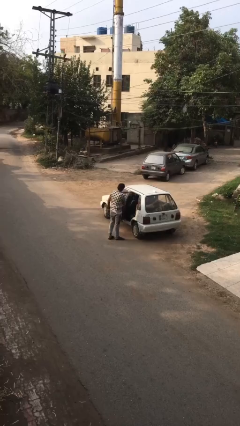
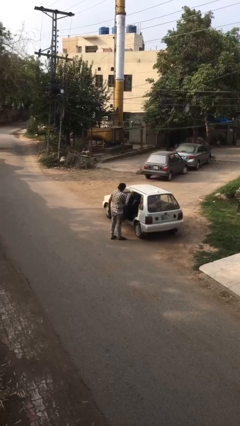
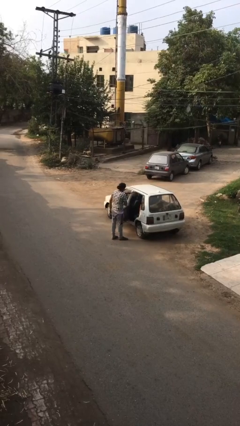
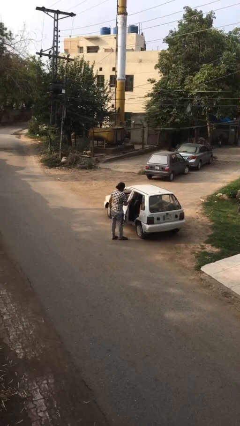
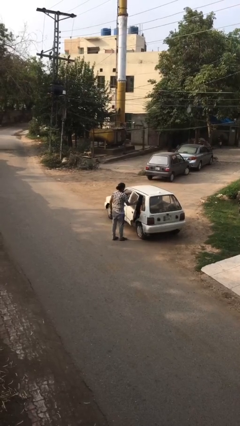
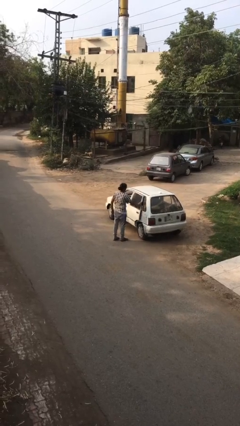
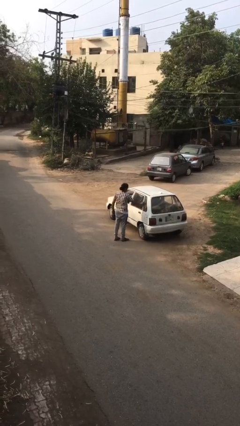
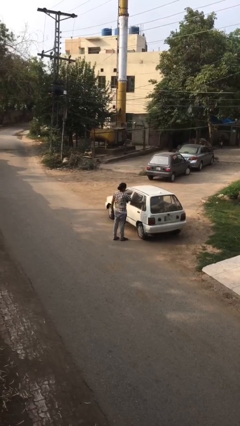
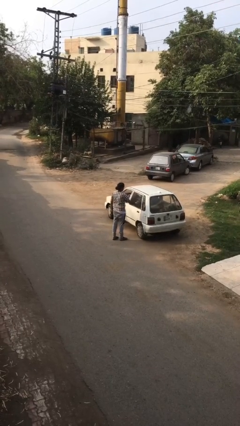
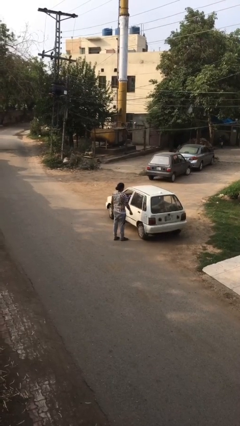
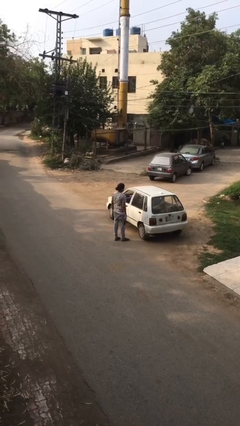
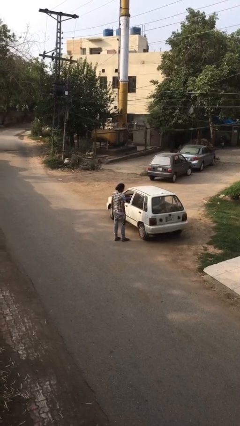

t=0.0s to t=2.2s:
person closes car door

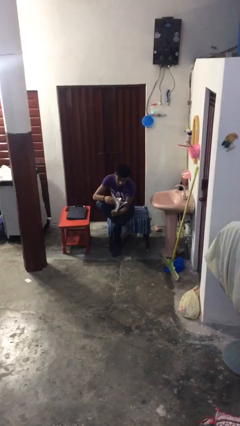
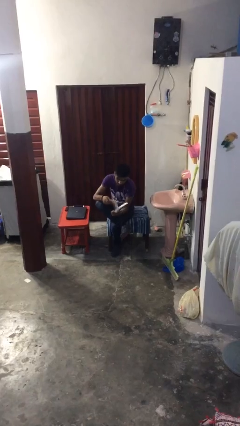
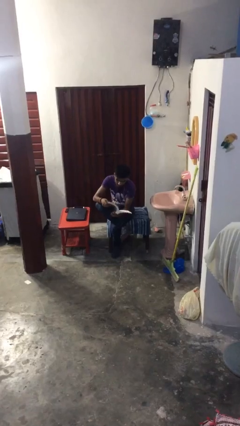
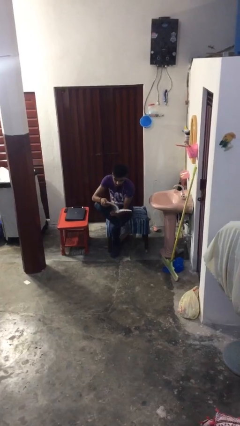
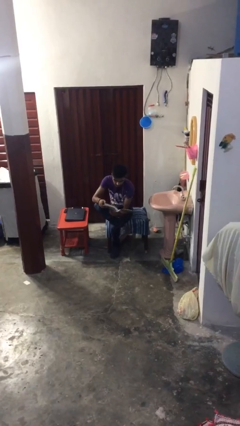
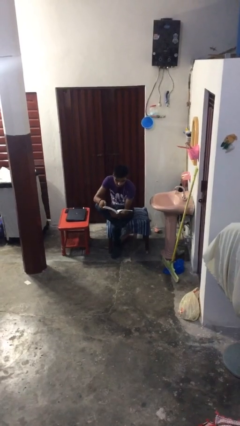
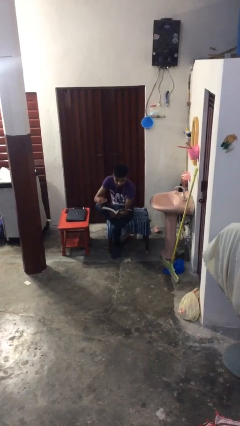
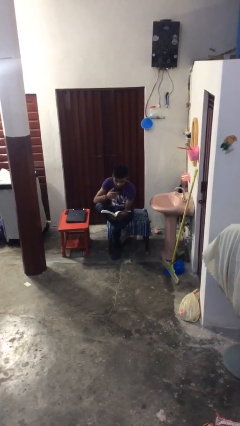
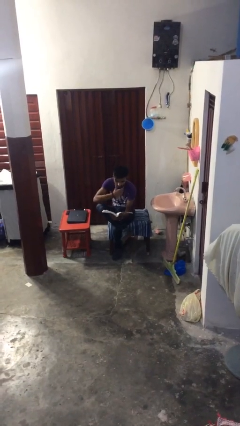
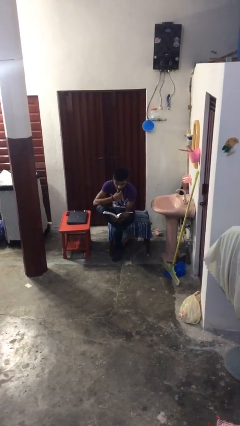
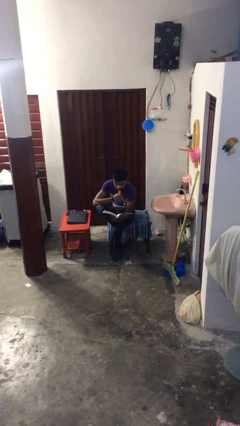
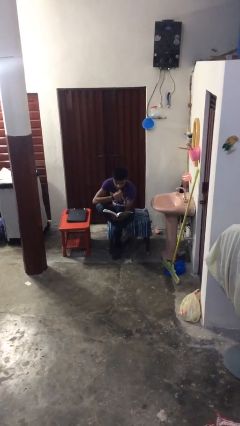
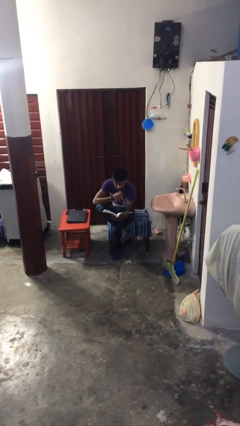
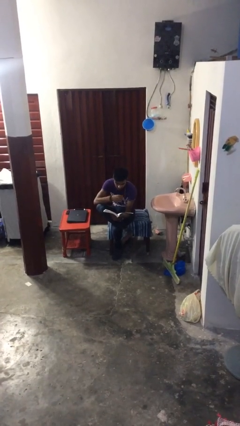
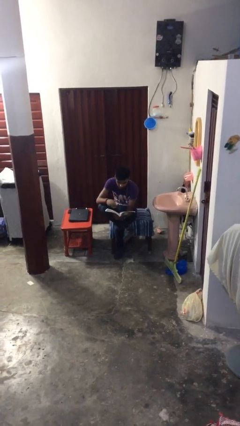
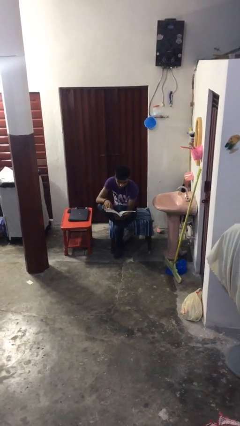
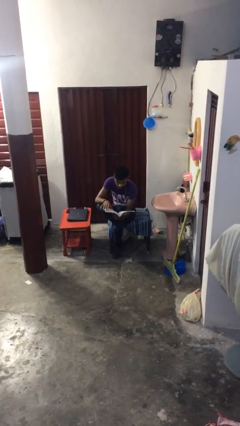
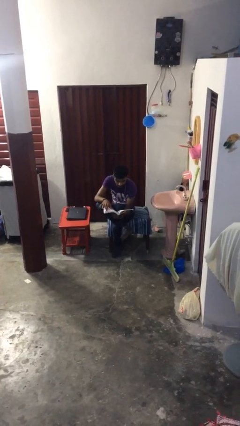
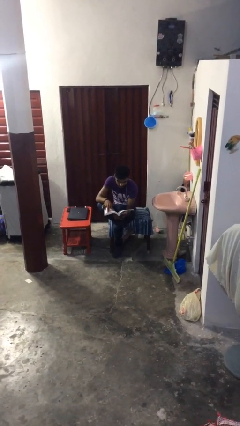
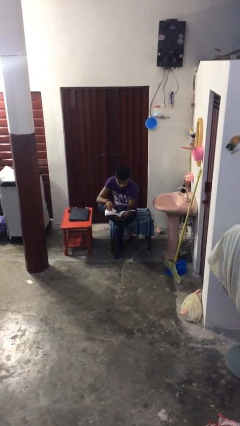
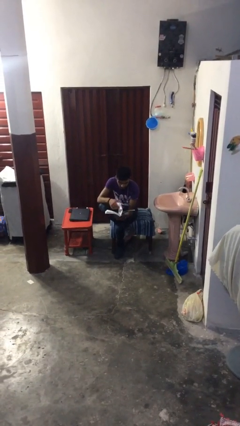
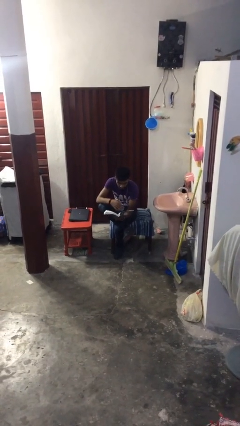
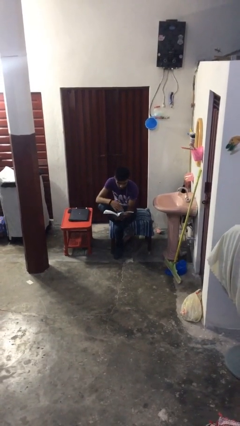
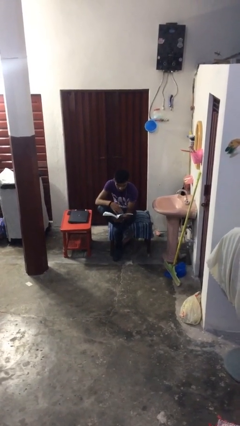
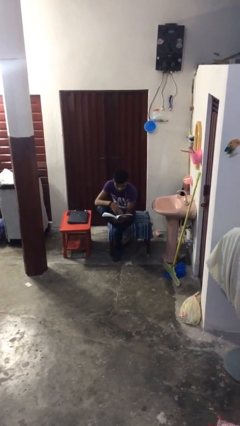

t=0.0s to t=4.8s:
person reads document

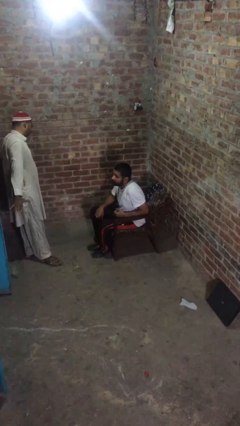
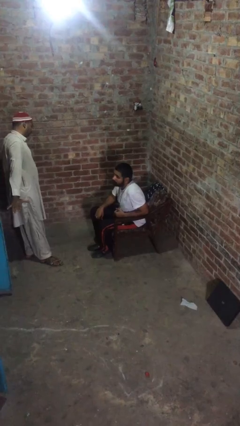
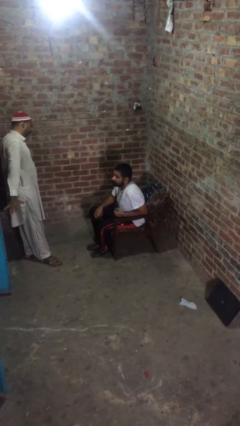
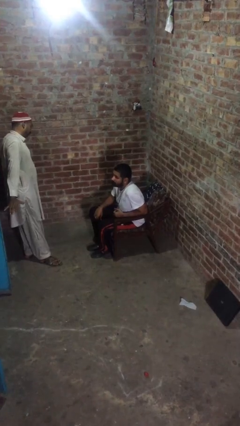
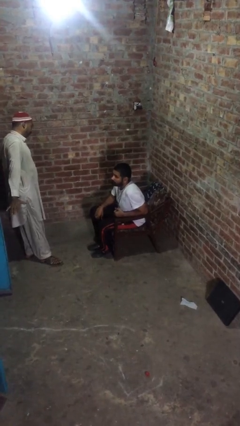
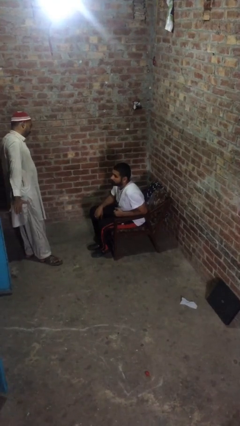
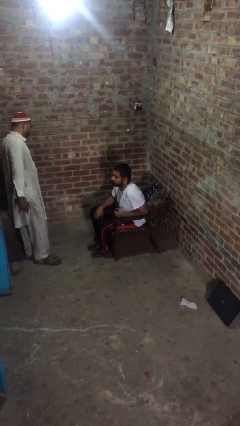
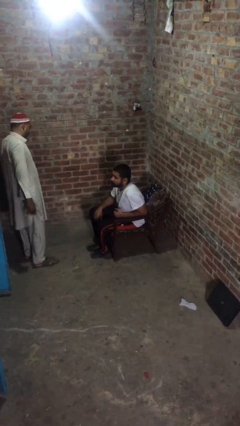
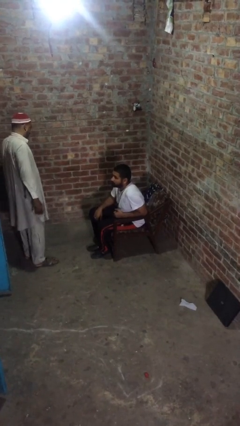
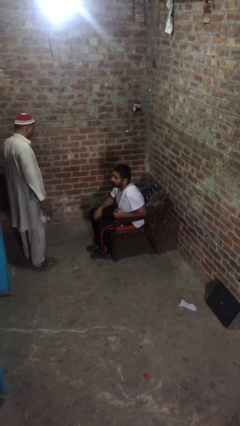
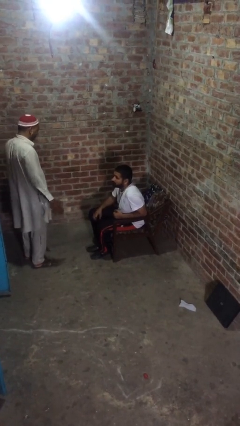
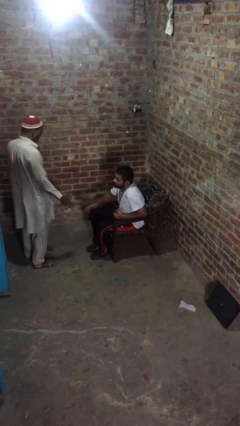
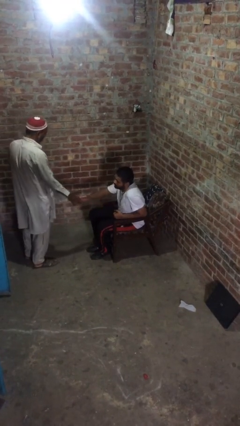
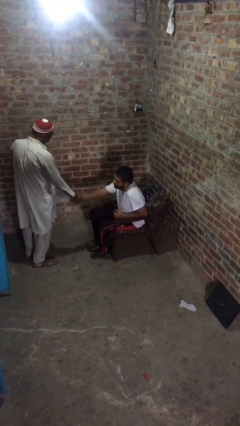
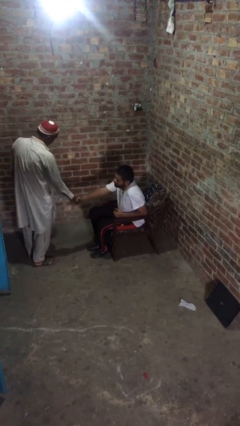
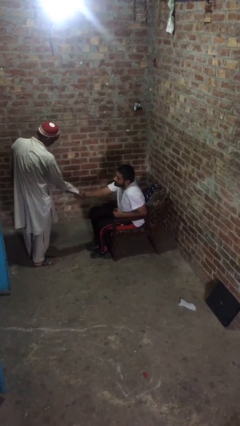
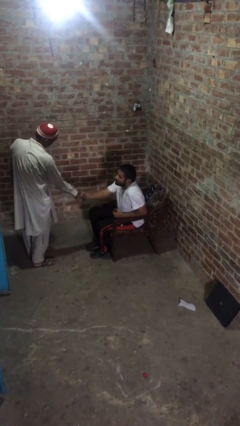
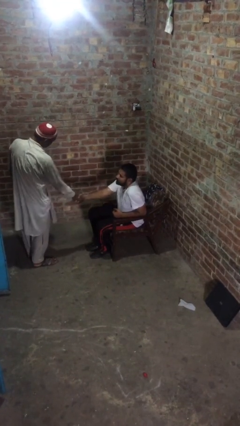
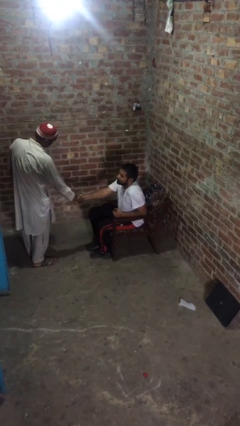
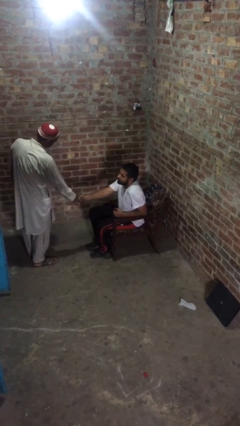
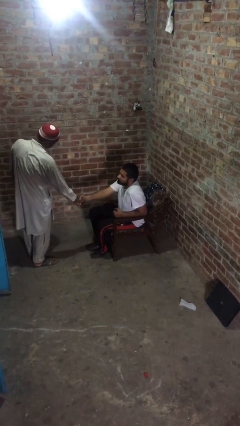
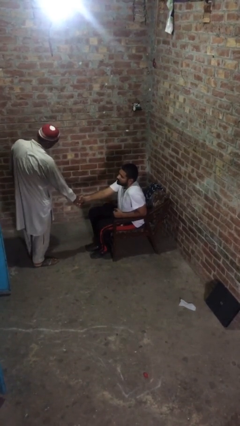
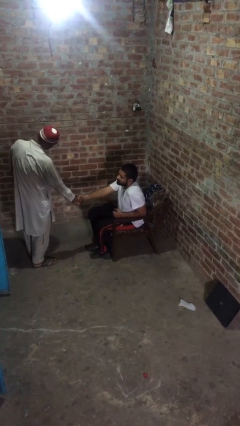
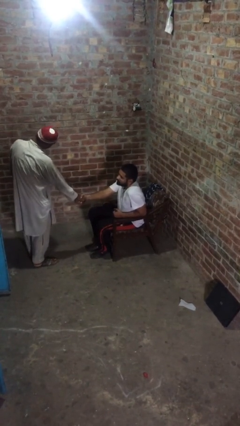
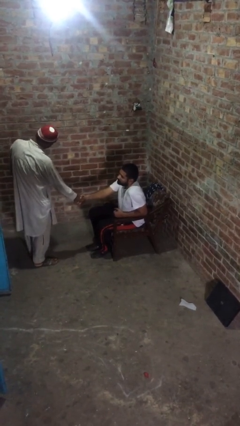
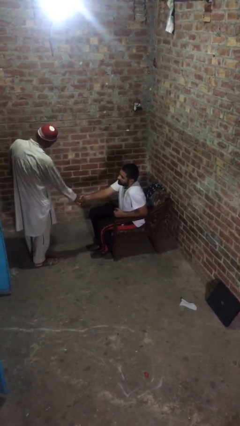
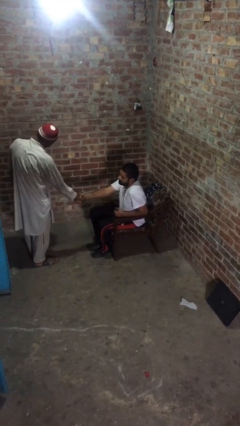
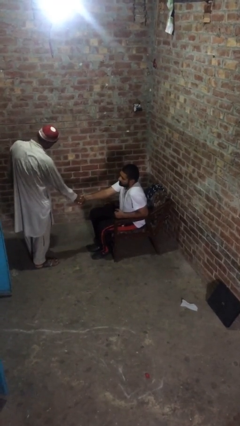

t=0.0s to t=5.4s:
person shakes hand

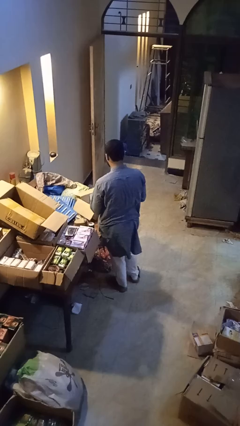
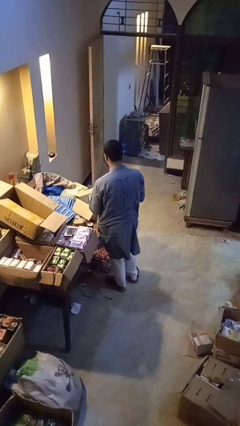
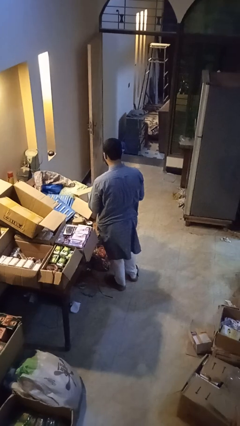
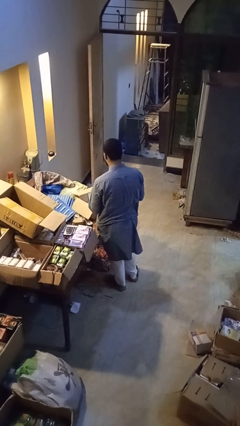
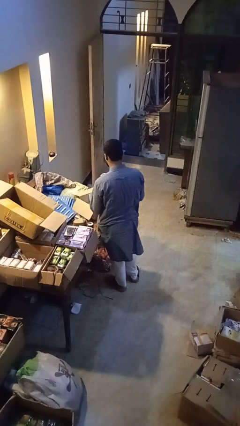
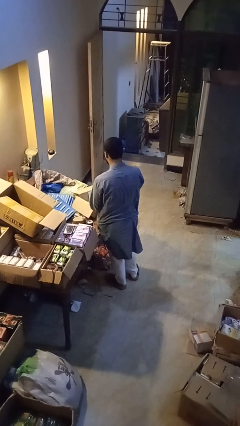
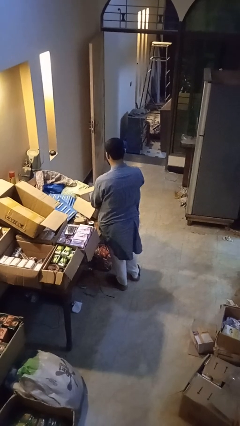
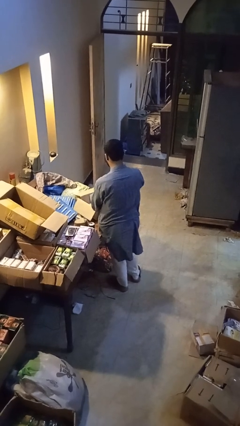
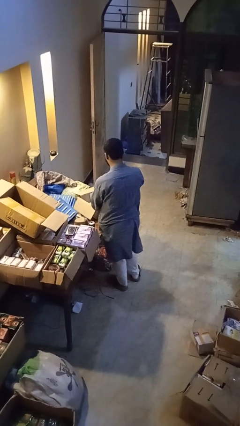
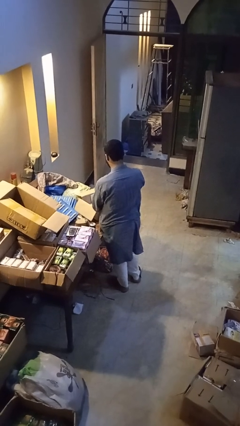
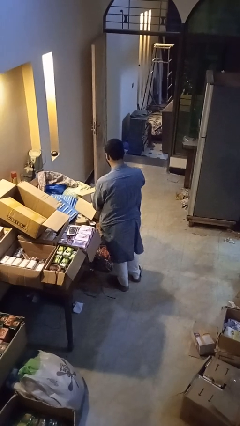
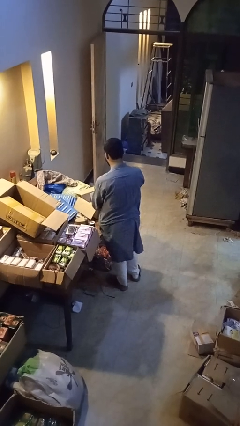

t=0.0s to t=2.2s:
person puts object into box

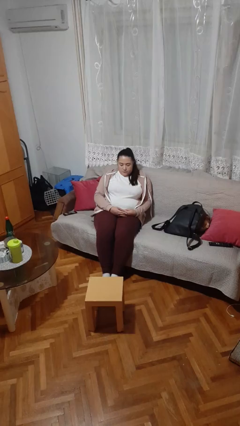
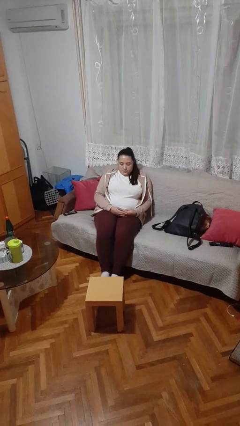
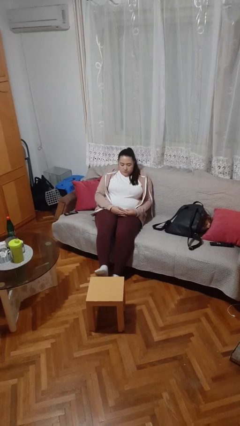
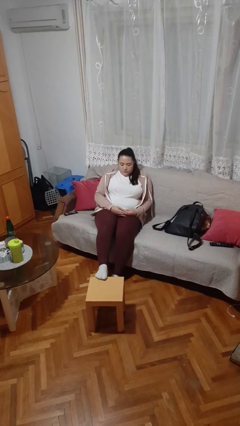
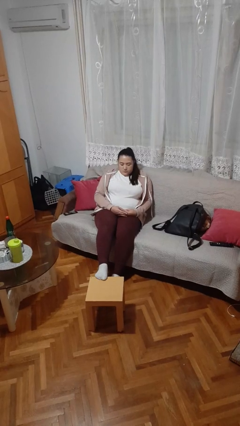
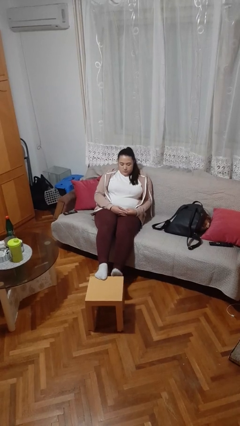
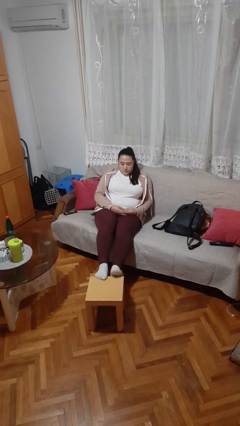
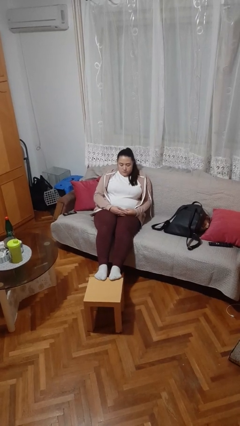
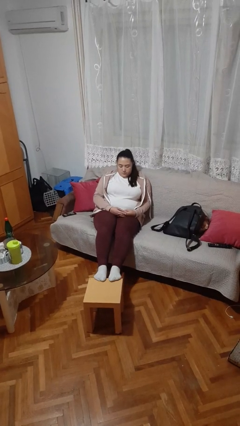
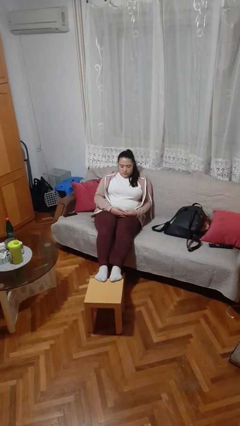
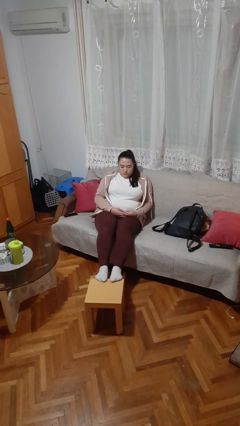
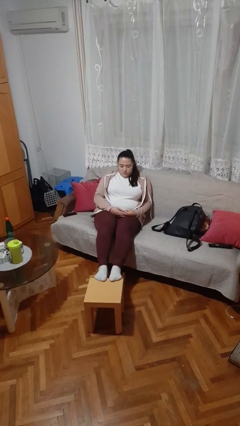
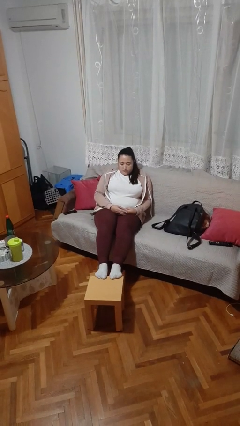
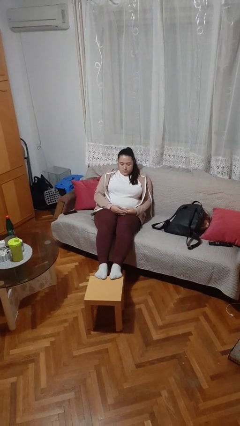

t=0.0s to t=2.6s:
person puts feet up

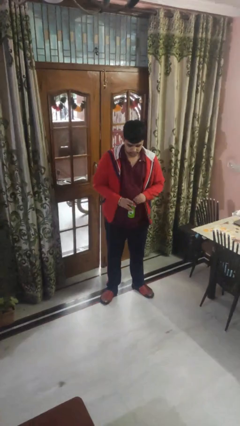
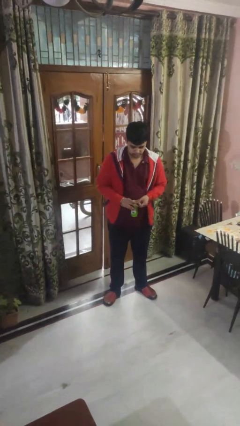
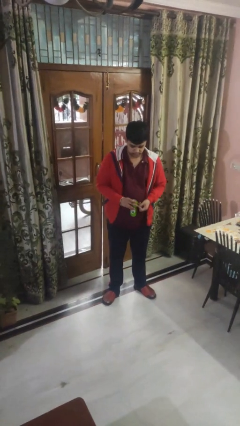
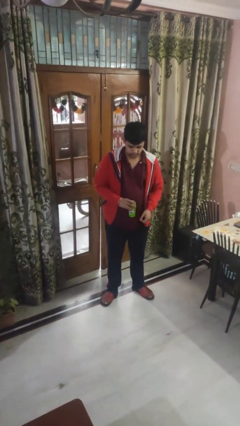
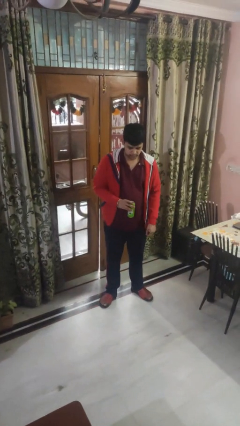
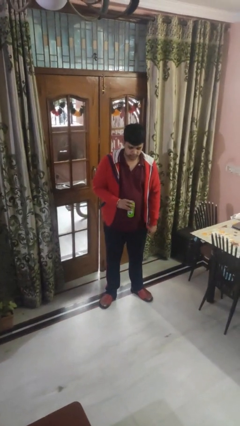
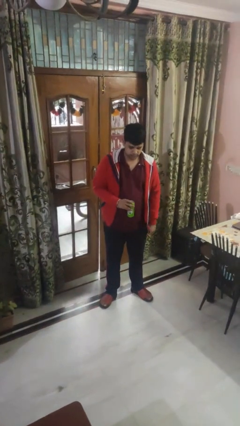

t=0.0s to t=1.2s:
person opens beverage can
